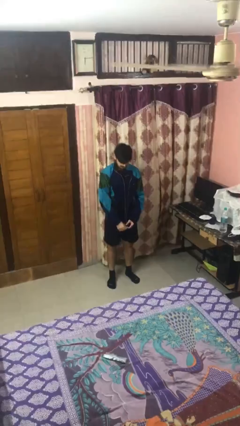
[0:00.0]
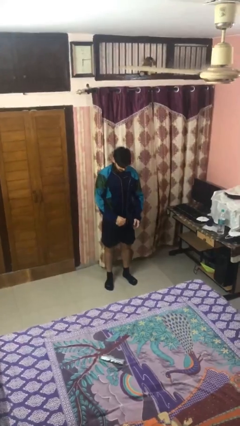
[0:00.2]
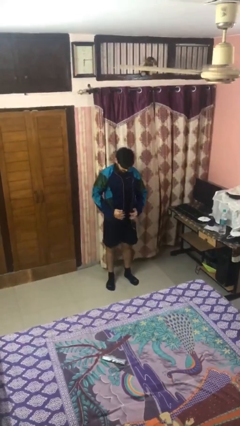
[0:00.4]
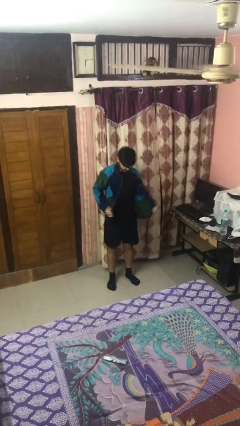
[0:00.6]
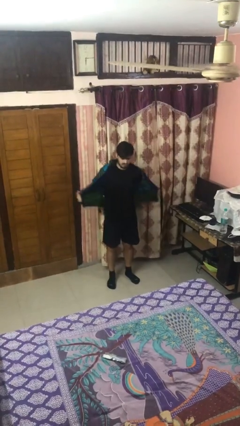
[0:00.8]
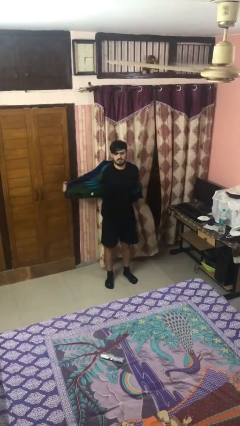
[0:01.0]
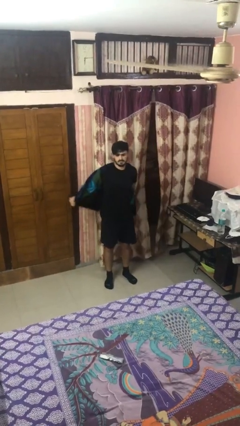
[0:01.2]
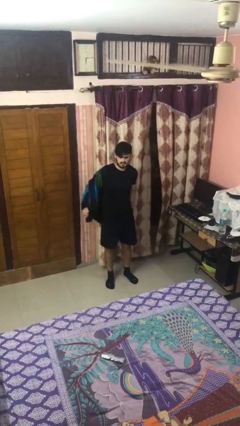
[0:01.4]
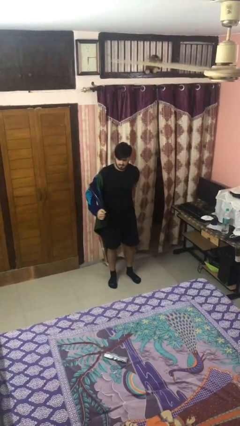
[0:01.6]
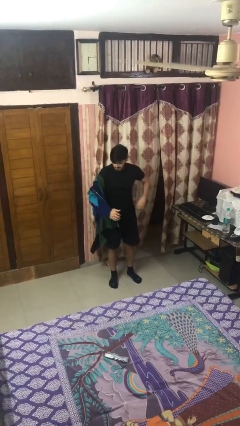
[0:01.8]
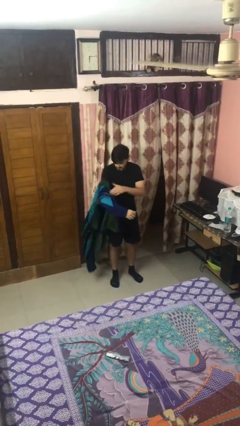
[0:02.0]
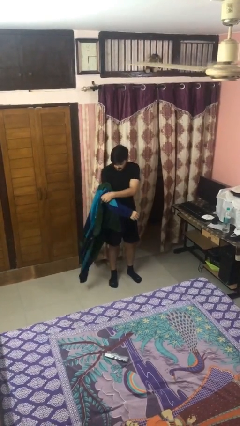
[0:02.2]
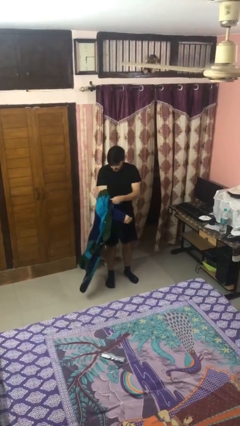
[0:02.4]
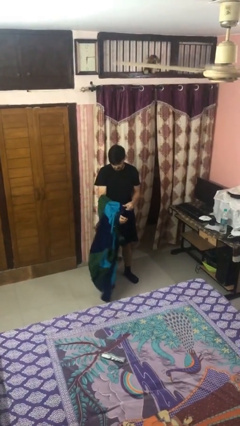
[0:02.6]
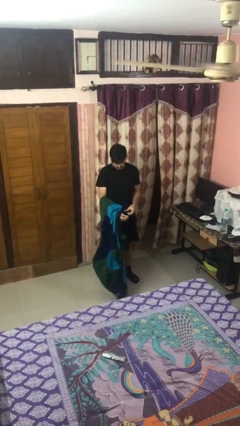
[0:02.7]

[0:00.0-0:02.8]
person takes off jacket

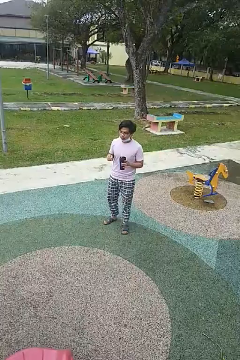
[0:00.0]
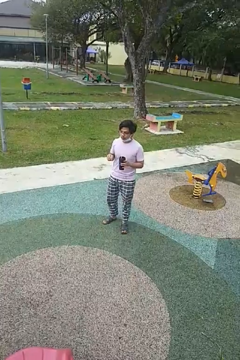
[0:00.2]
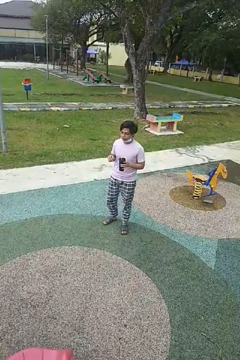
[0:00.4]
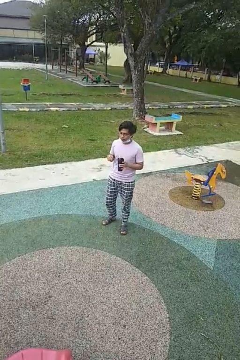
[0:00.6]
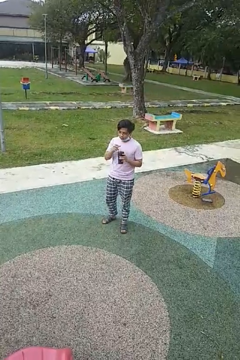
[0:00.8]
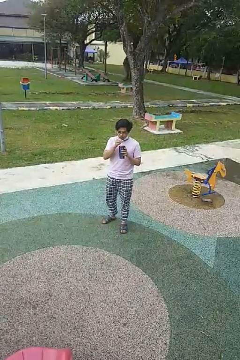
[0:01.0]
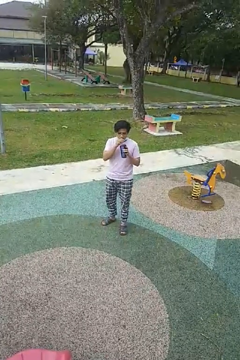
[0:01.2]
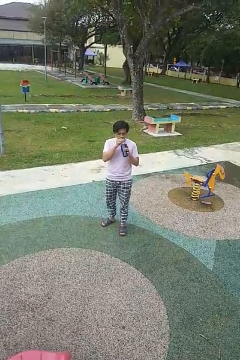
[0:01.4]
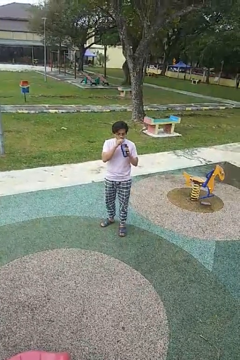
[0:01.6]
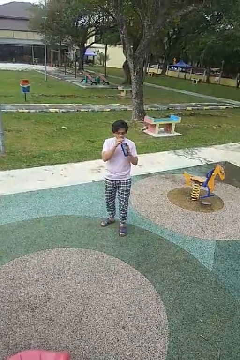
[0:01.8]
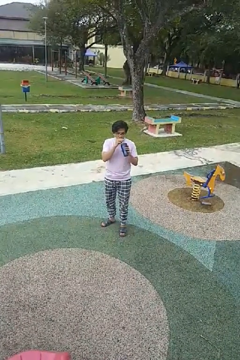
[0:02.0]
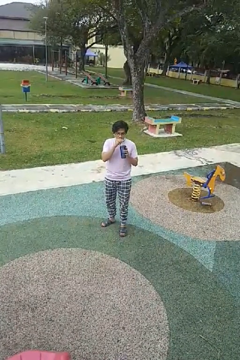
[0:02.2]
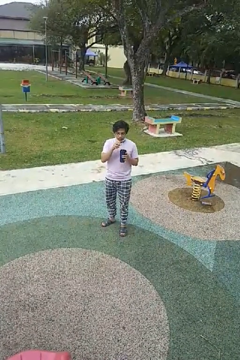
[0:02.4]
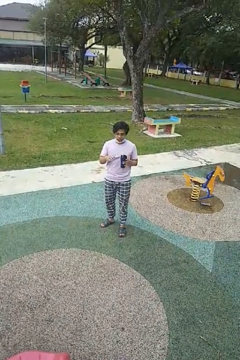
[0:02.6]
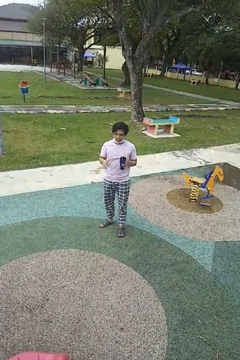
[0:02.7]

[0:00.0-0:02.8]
person drinks from straw

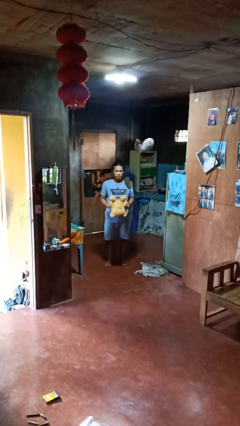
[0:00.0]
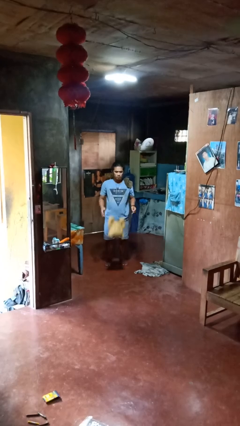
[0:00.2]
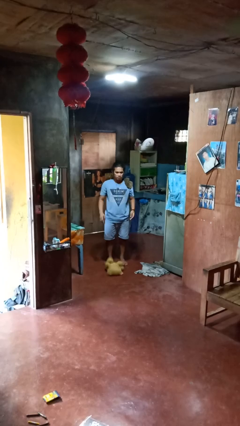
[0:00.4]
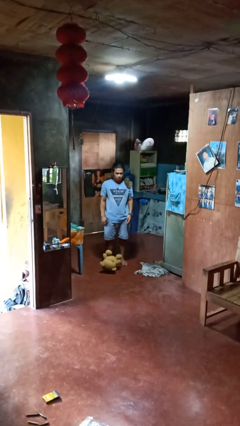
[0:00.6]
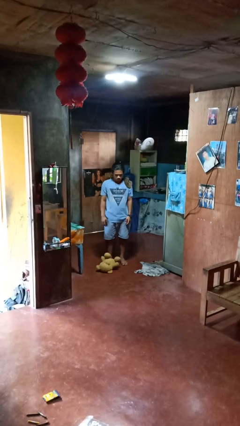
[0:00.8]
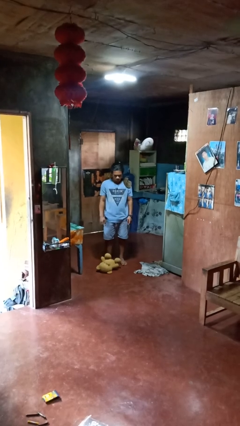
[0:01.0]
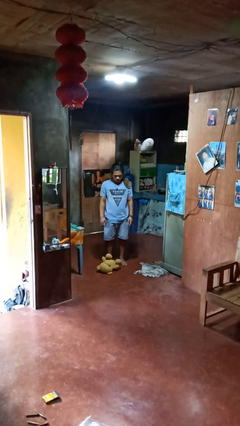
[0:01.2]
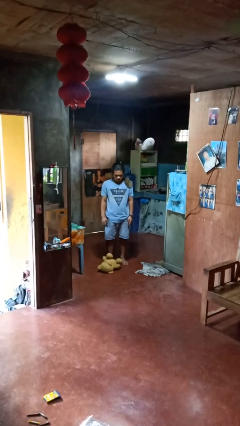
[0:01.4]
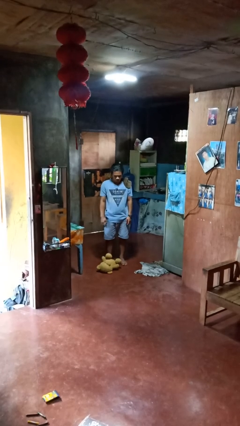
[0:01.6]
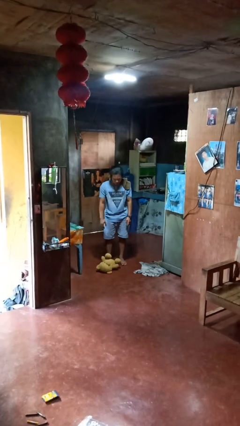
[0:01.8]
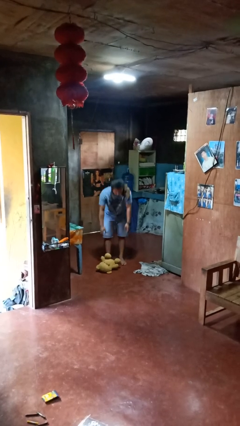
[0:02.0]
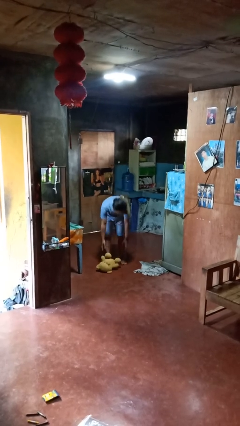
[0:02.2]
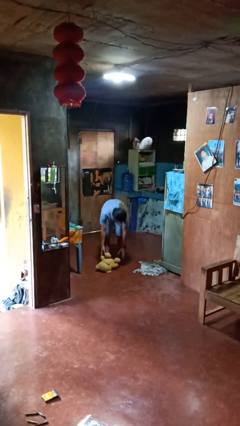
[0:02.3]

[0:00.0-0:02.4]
person drops object

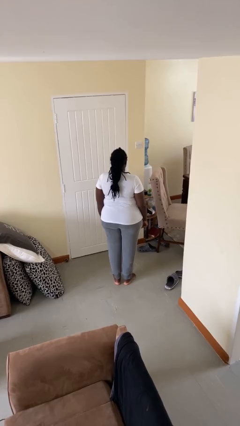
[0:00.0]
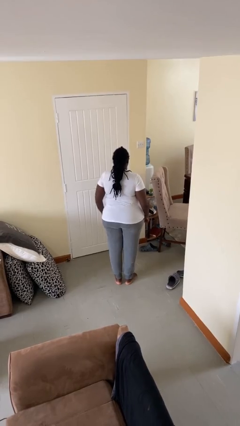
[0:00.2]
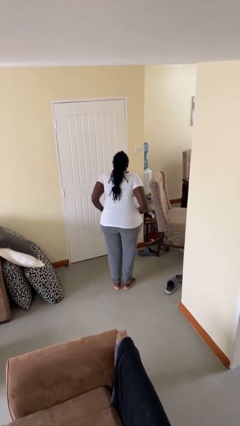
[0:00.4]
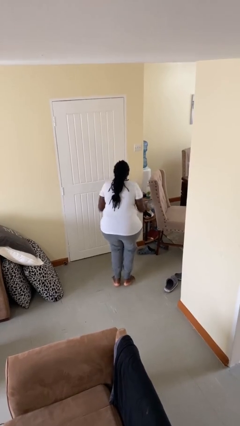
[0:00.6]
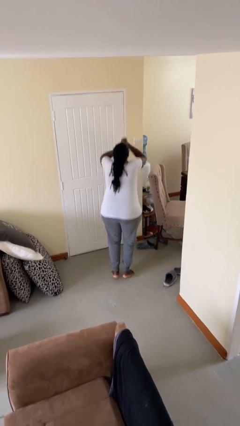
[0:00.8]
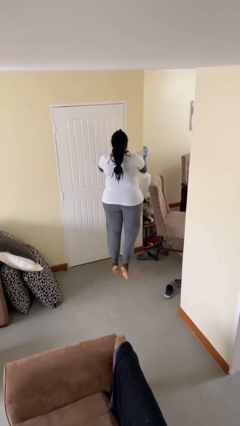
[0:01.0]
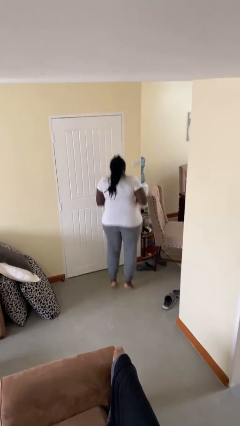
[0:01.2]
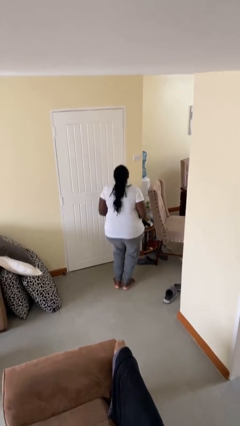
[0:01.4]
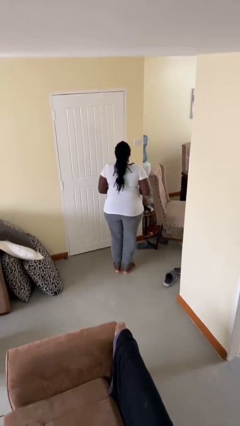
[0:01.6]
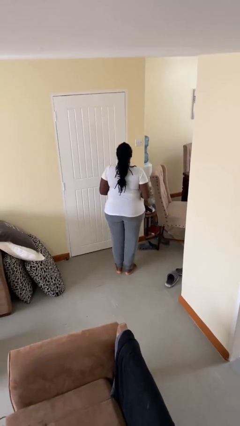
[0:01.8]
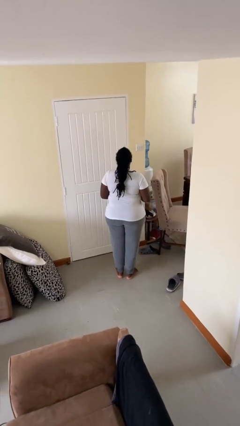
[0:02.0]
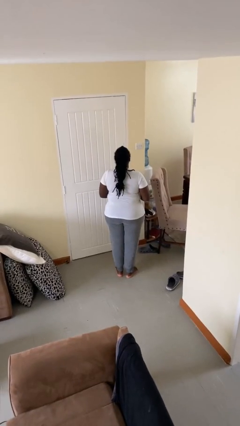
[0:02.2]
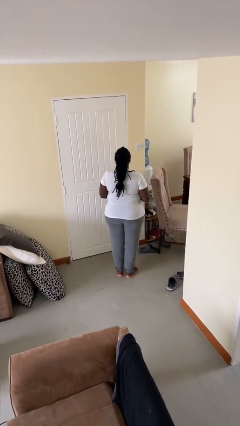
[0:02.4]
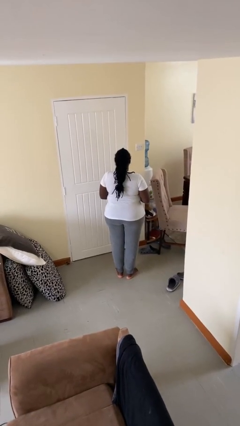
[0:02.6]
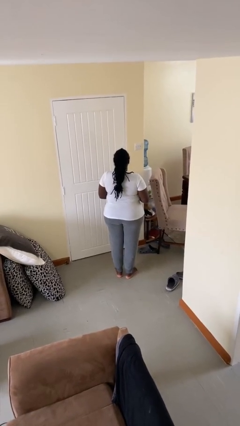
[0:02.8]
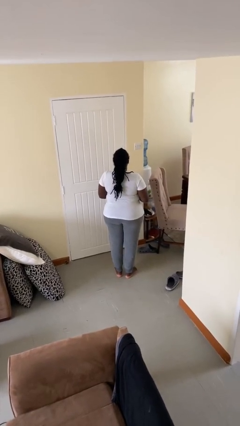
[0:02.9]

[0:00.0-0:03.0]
person jumps

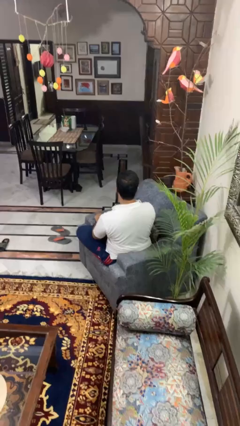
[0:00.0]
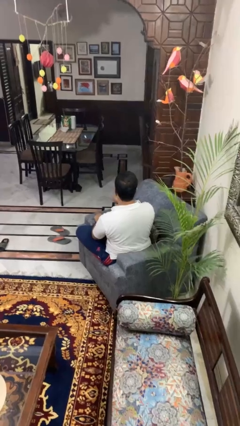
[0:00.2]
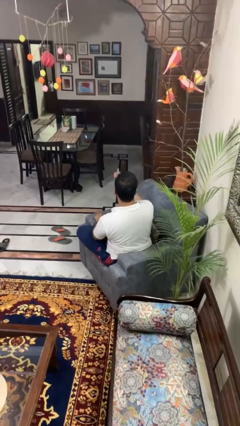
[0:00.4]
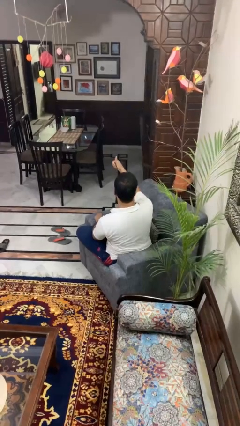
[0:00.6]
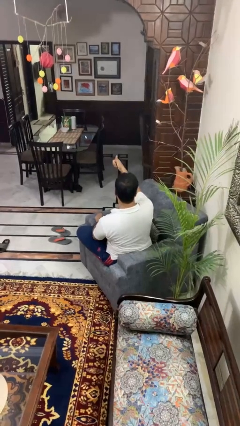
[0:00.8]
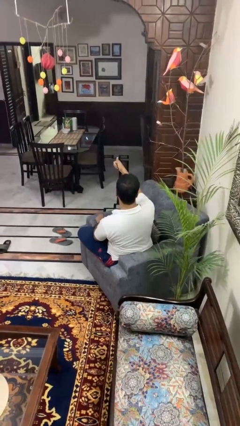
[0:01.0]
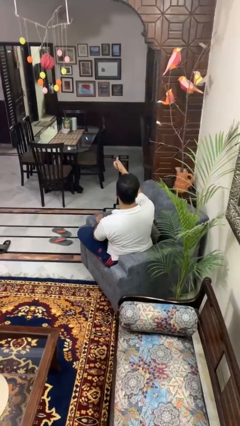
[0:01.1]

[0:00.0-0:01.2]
person gestures thumbs up

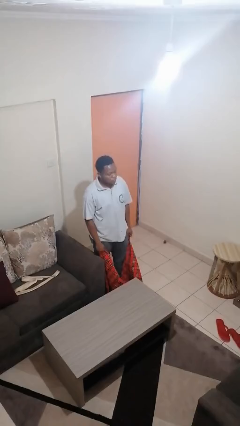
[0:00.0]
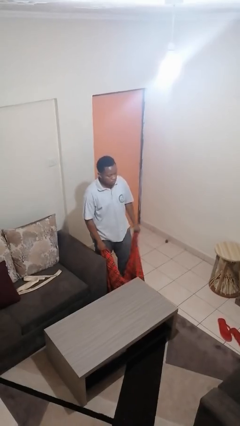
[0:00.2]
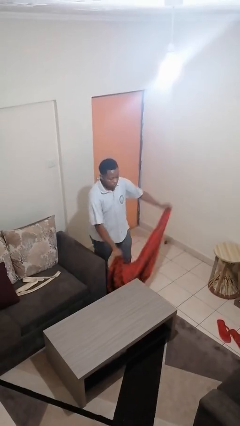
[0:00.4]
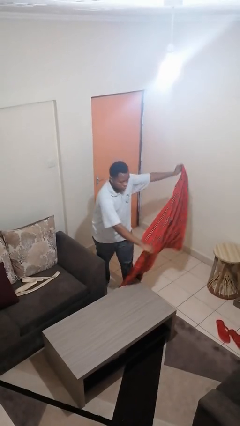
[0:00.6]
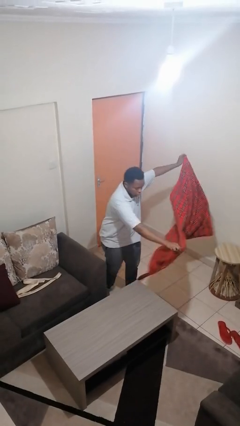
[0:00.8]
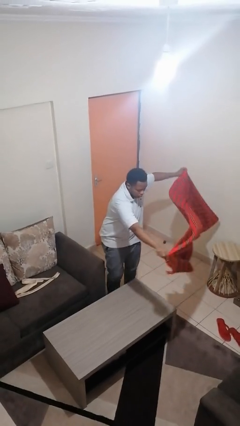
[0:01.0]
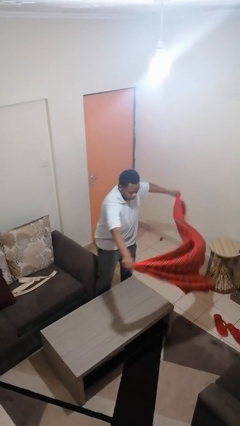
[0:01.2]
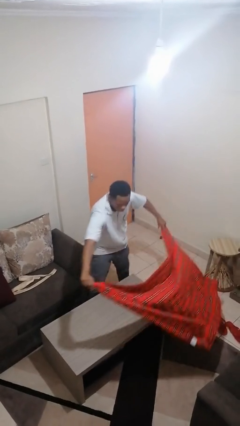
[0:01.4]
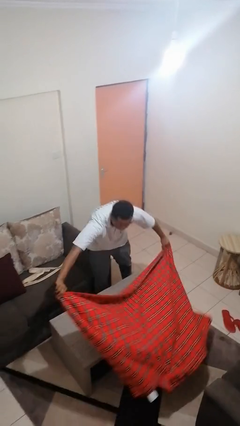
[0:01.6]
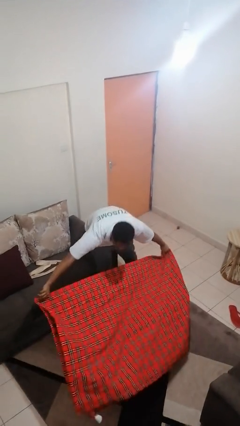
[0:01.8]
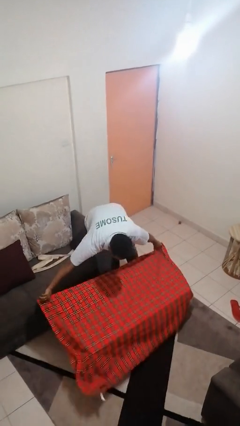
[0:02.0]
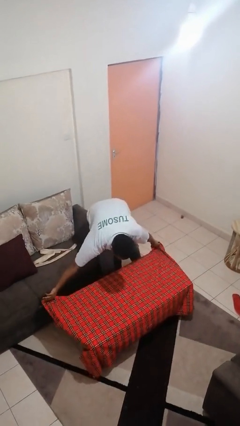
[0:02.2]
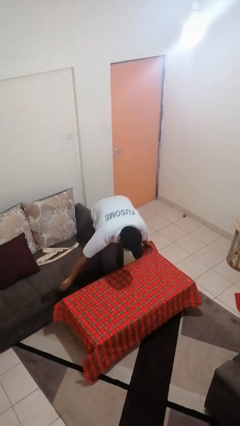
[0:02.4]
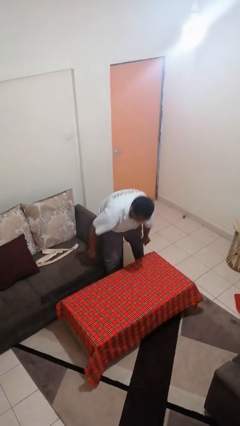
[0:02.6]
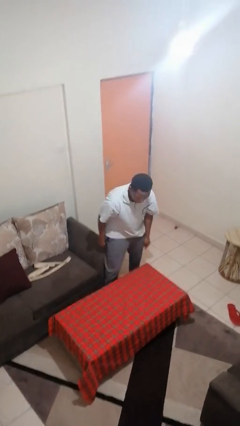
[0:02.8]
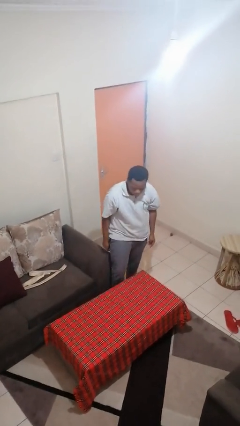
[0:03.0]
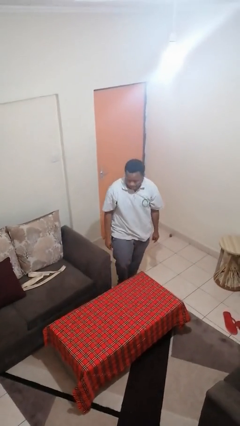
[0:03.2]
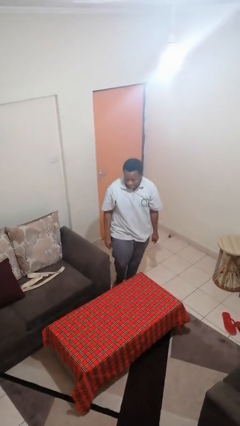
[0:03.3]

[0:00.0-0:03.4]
person spreads tablecloth

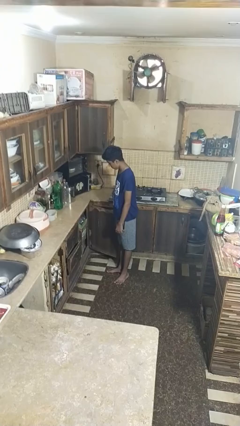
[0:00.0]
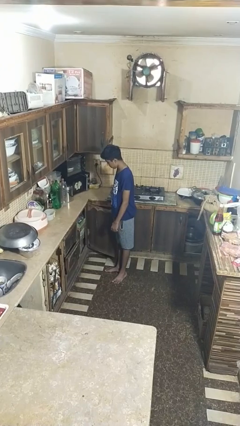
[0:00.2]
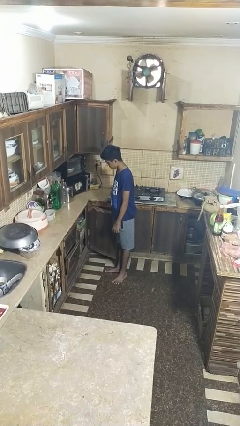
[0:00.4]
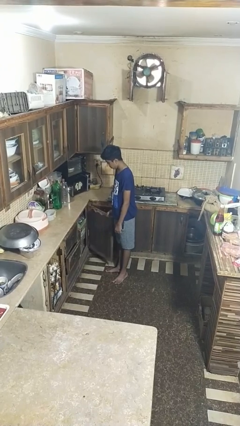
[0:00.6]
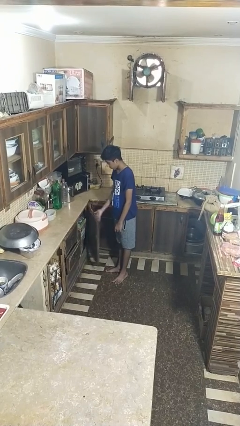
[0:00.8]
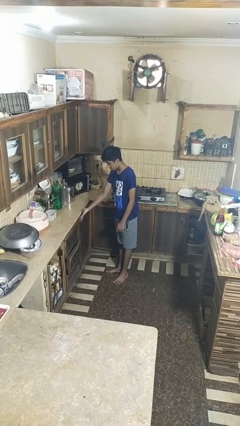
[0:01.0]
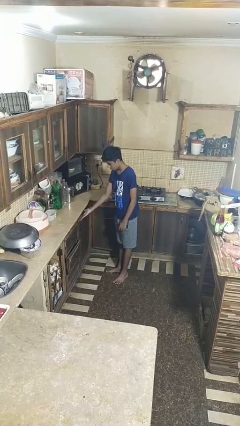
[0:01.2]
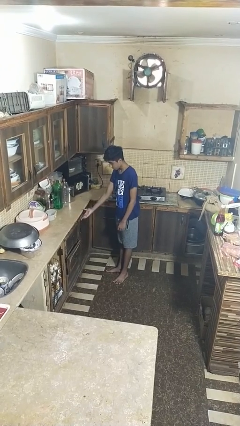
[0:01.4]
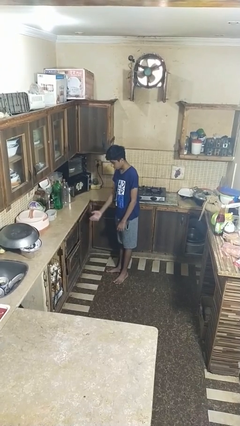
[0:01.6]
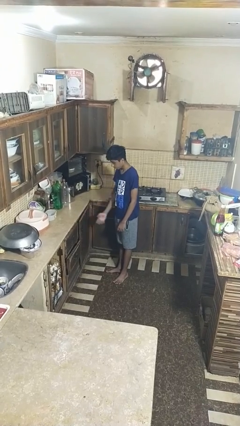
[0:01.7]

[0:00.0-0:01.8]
person closes closet door
